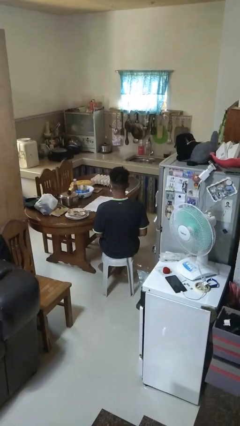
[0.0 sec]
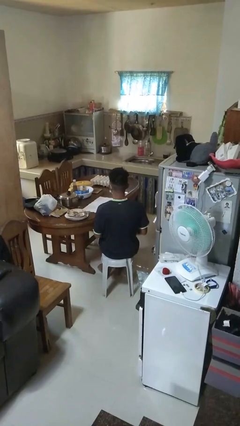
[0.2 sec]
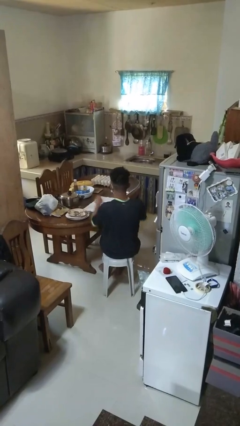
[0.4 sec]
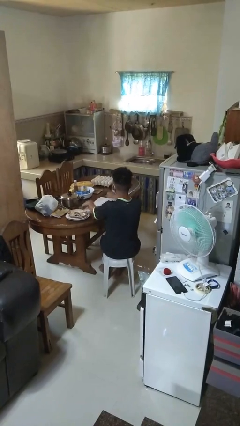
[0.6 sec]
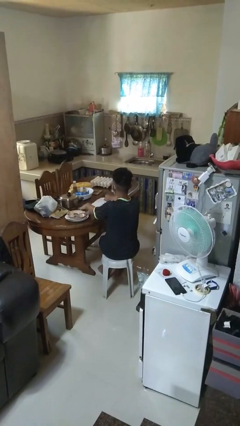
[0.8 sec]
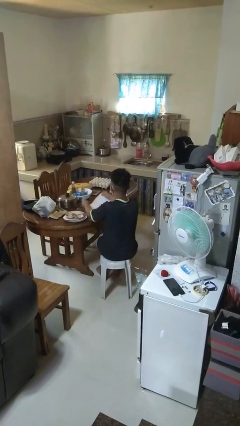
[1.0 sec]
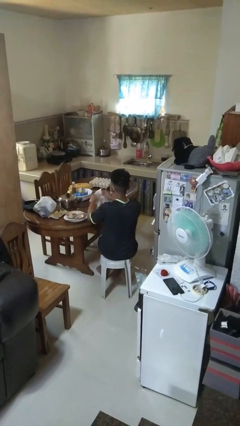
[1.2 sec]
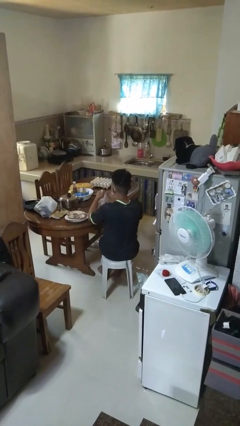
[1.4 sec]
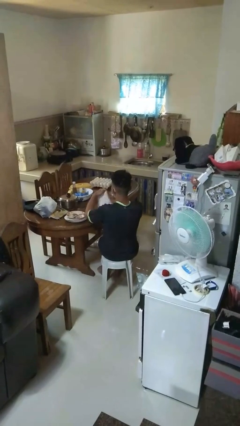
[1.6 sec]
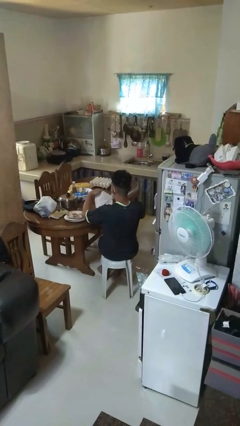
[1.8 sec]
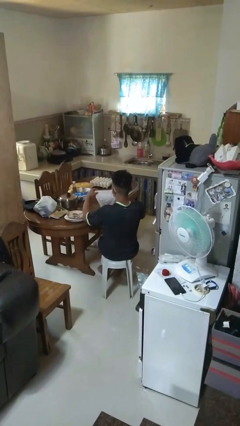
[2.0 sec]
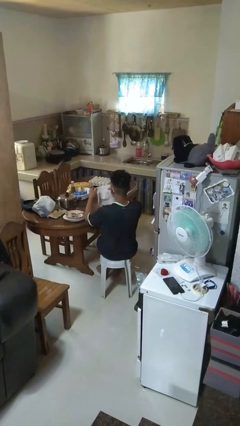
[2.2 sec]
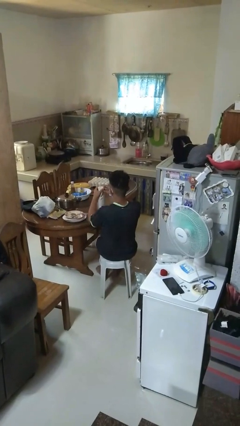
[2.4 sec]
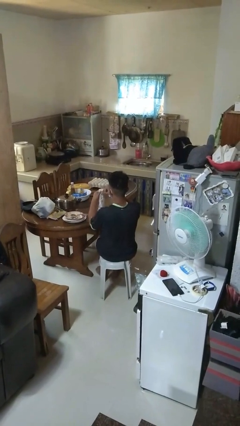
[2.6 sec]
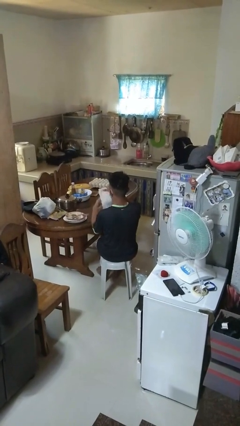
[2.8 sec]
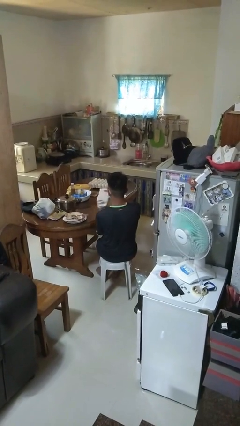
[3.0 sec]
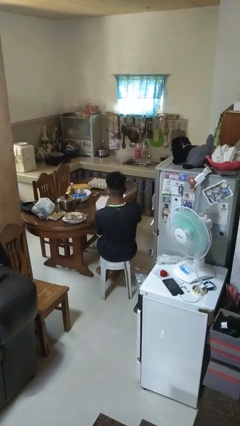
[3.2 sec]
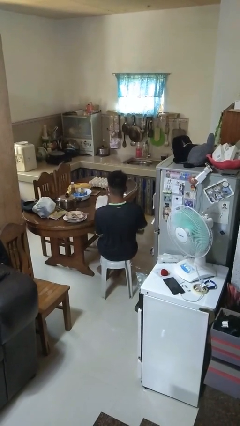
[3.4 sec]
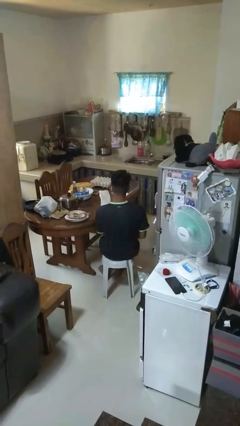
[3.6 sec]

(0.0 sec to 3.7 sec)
person folds tablecloth

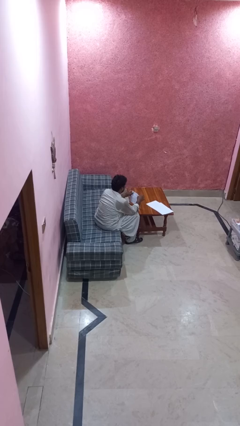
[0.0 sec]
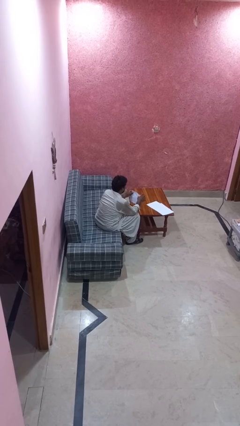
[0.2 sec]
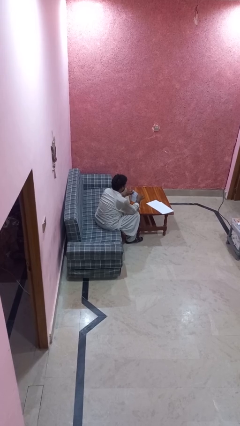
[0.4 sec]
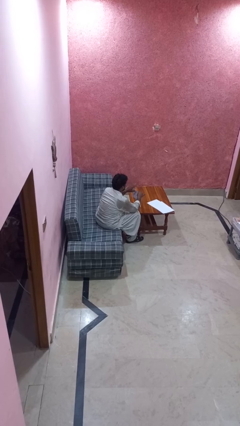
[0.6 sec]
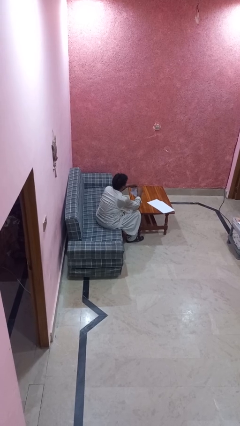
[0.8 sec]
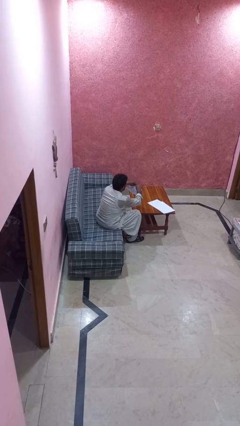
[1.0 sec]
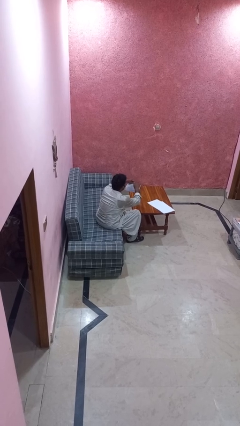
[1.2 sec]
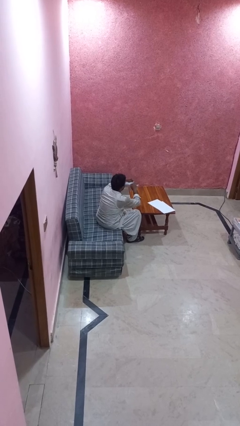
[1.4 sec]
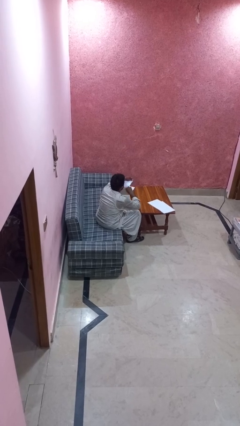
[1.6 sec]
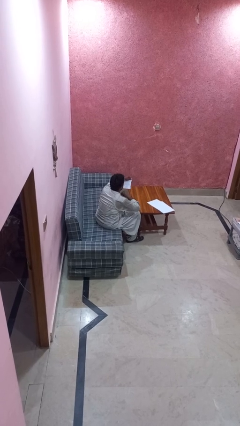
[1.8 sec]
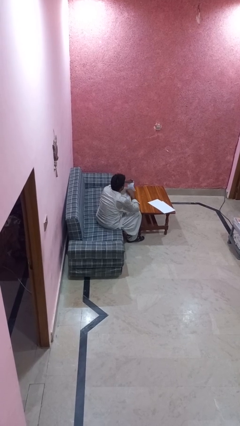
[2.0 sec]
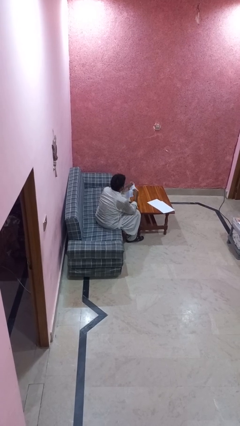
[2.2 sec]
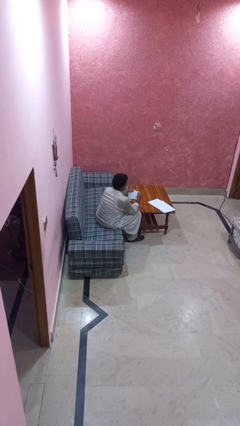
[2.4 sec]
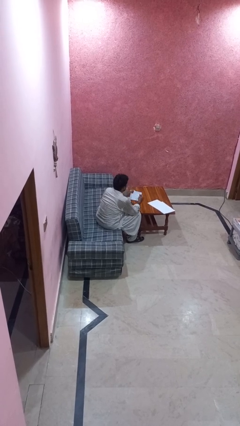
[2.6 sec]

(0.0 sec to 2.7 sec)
person tears paper

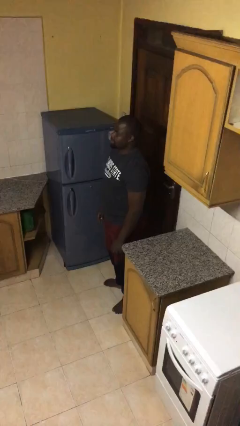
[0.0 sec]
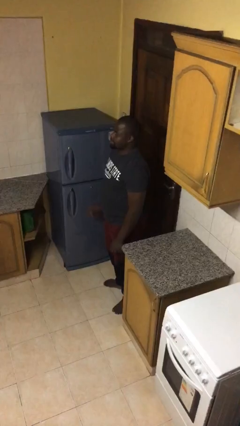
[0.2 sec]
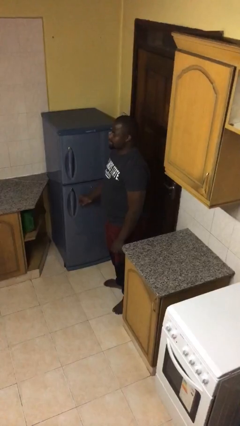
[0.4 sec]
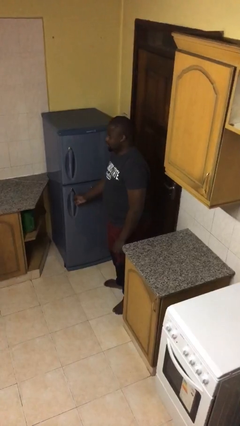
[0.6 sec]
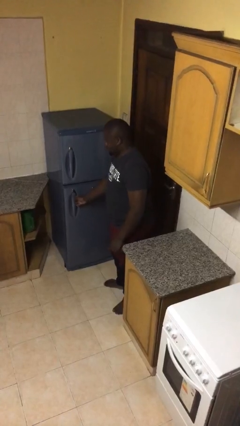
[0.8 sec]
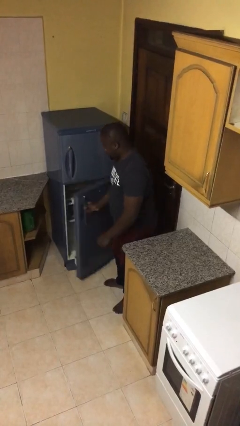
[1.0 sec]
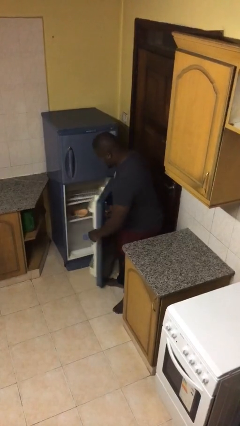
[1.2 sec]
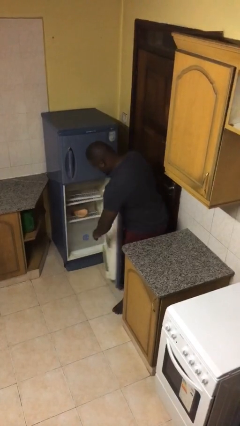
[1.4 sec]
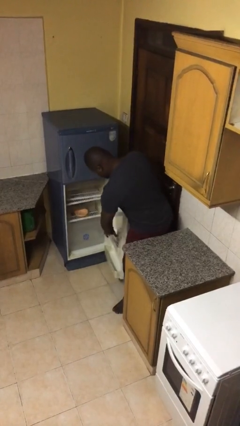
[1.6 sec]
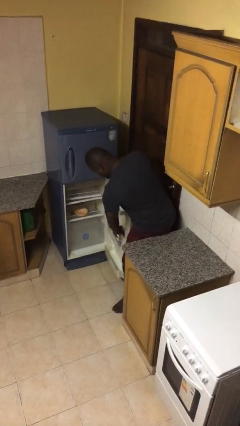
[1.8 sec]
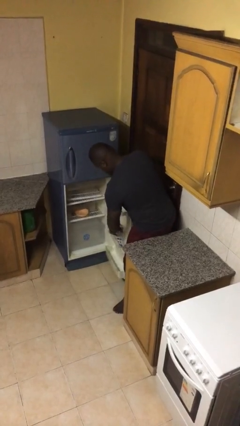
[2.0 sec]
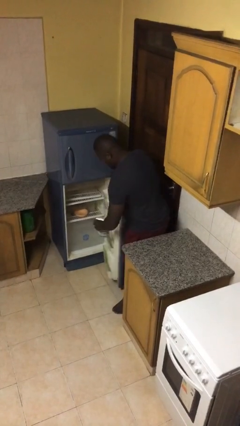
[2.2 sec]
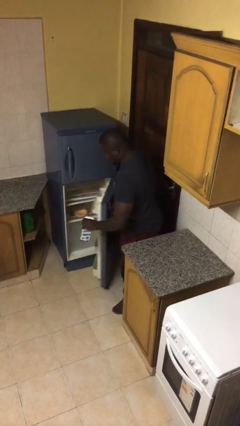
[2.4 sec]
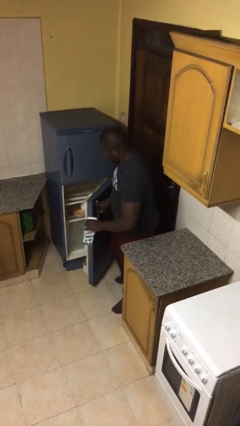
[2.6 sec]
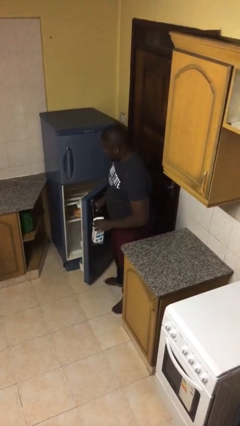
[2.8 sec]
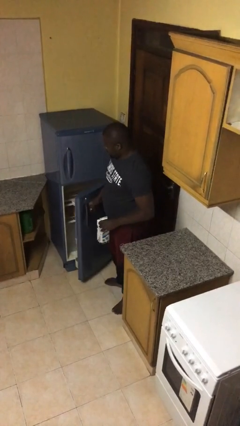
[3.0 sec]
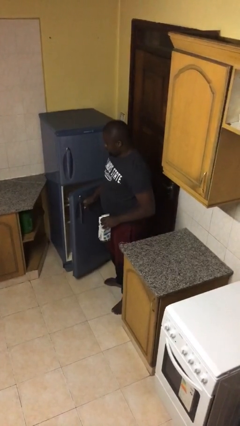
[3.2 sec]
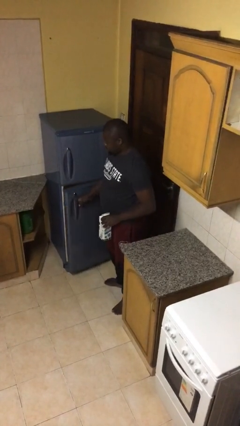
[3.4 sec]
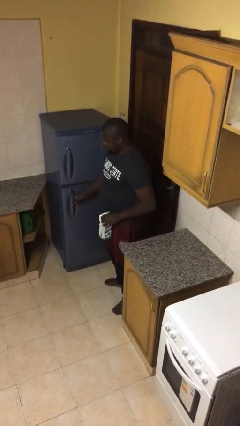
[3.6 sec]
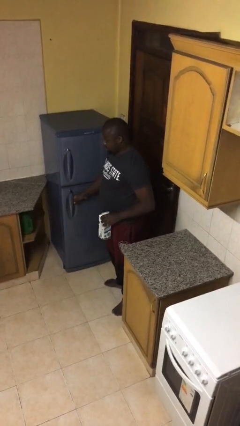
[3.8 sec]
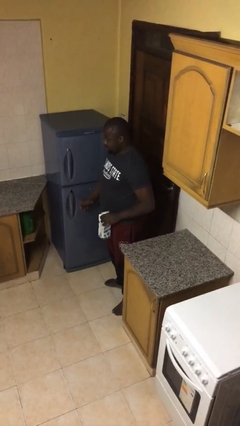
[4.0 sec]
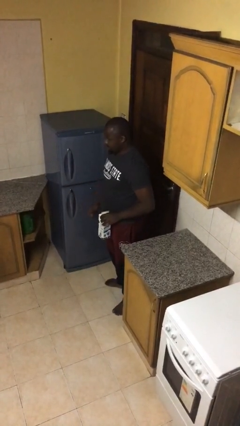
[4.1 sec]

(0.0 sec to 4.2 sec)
person takes object from refrigerator

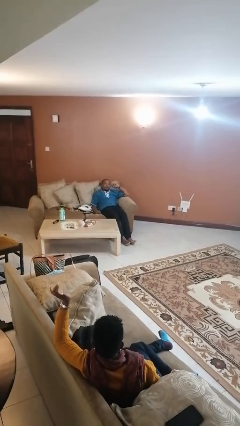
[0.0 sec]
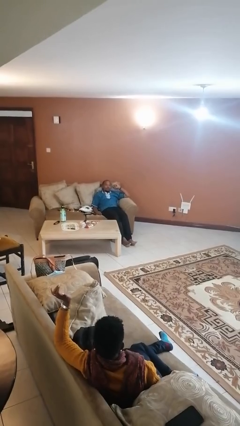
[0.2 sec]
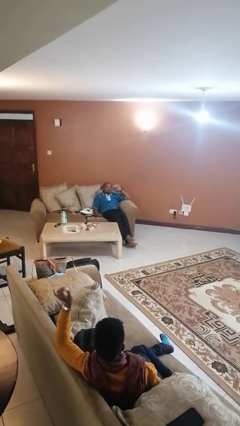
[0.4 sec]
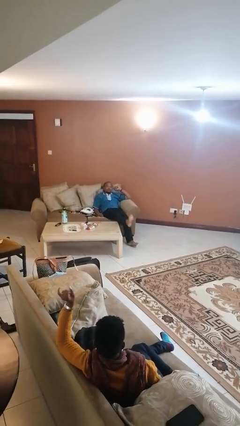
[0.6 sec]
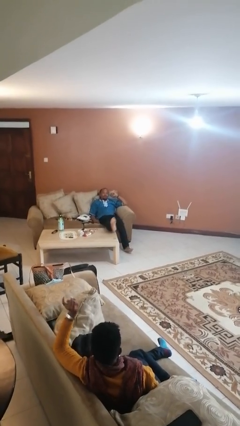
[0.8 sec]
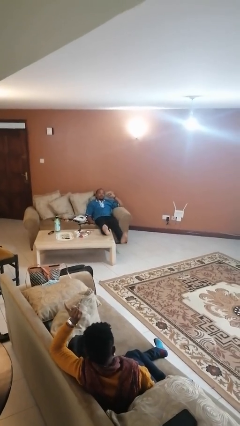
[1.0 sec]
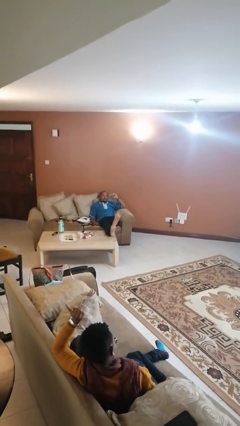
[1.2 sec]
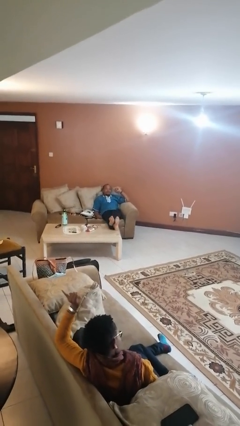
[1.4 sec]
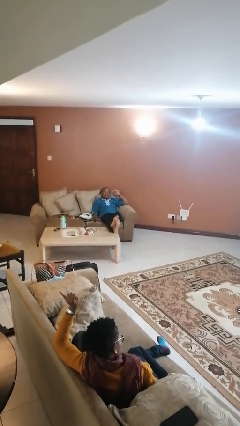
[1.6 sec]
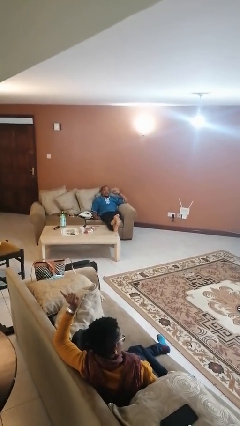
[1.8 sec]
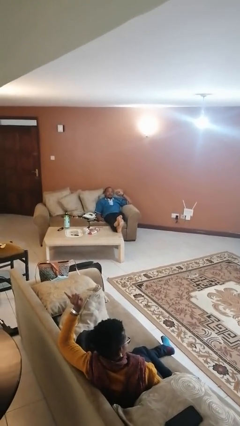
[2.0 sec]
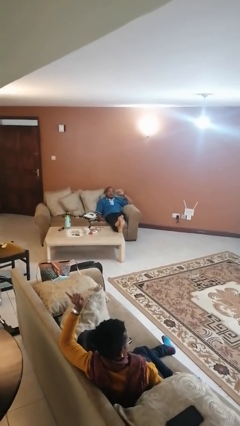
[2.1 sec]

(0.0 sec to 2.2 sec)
person puts feet up

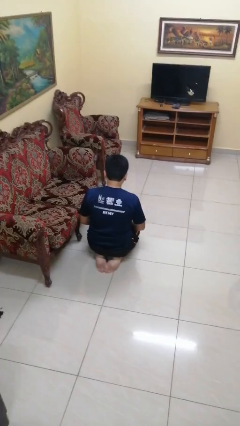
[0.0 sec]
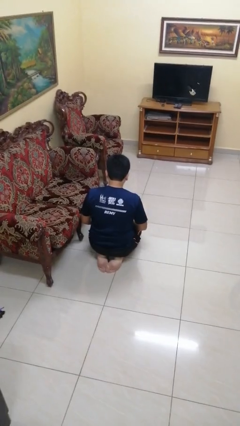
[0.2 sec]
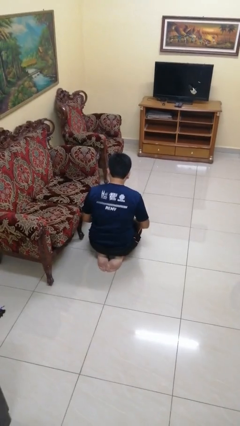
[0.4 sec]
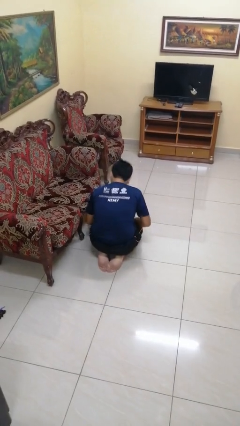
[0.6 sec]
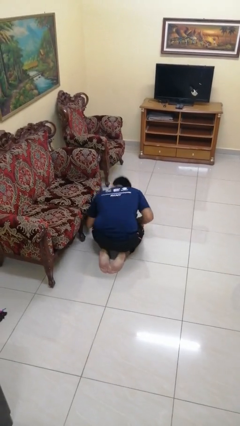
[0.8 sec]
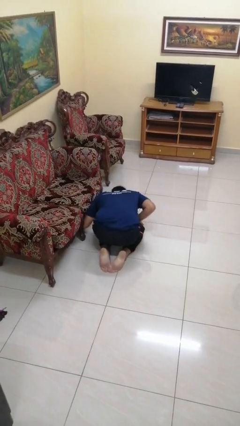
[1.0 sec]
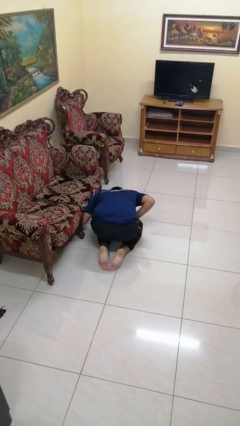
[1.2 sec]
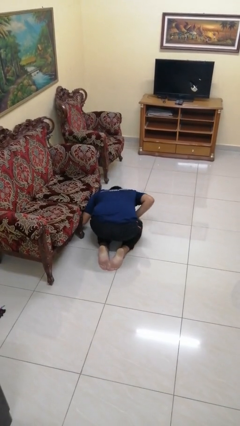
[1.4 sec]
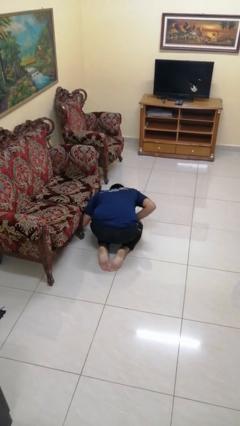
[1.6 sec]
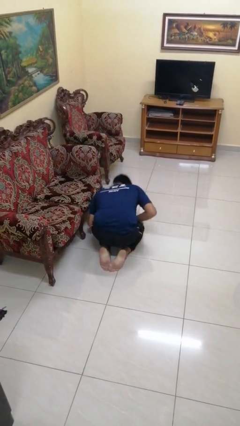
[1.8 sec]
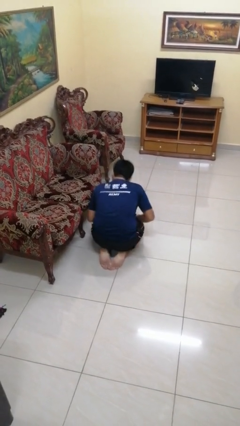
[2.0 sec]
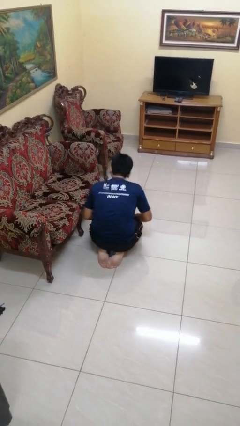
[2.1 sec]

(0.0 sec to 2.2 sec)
person searches under couch

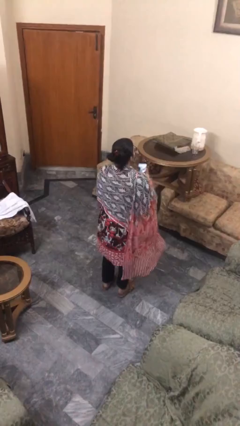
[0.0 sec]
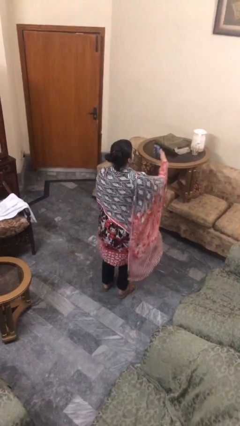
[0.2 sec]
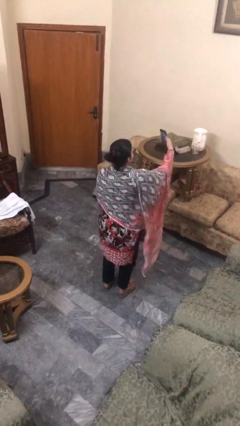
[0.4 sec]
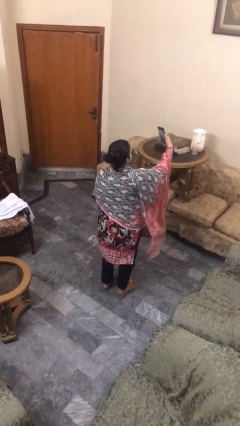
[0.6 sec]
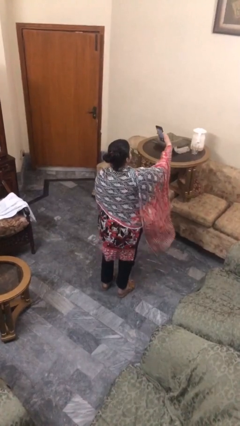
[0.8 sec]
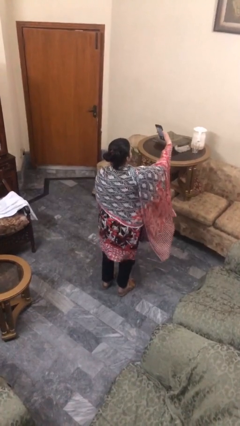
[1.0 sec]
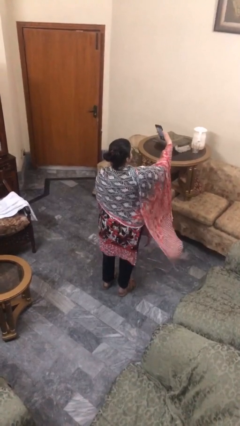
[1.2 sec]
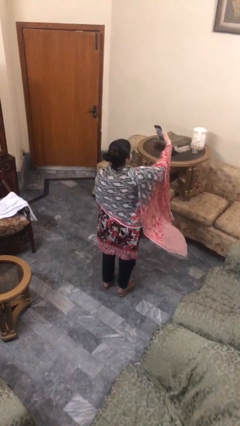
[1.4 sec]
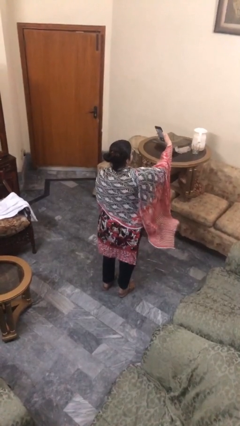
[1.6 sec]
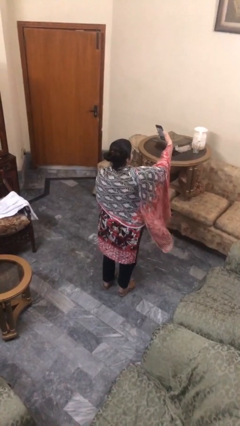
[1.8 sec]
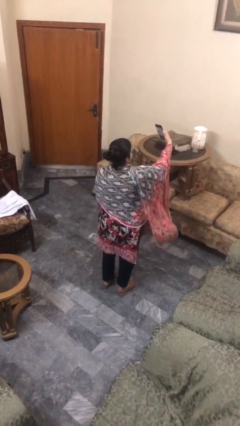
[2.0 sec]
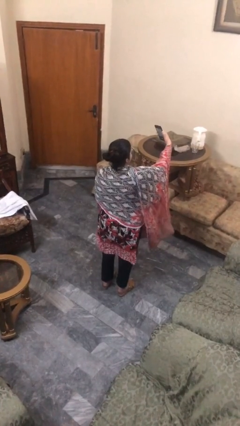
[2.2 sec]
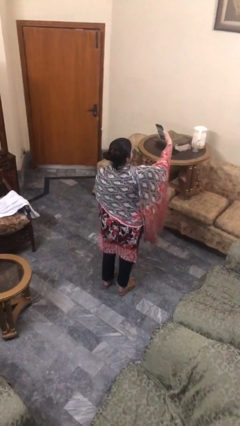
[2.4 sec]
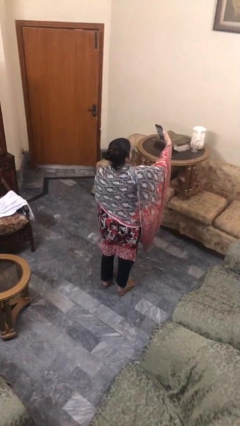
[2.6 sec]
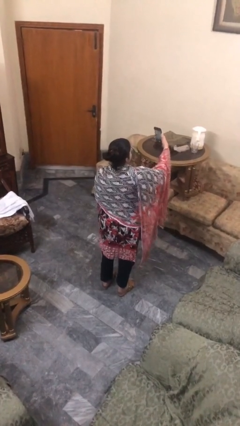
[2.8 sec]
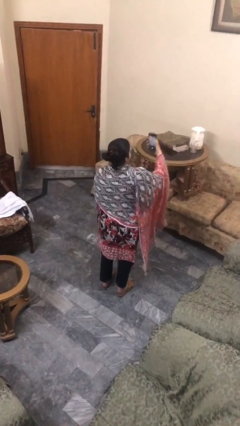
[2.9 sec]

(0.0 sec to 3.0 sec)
person takes selfie
